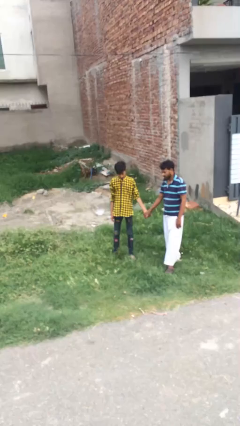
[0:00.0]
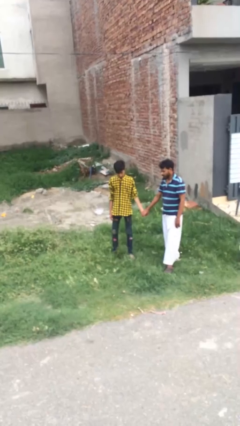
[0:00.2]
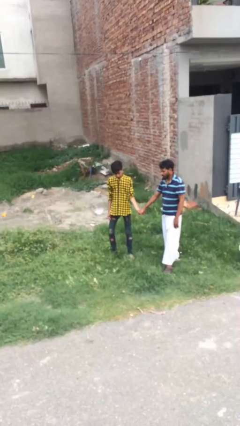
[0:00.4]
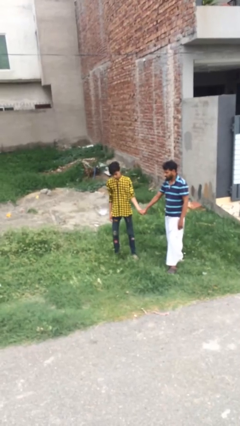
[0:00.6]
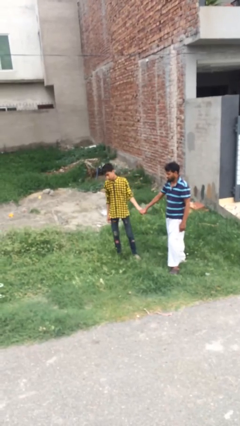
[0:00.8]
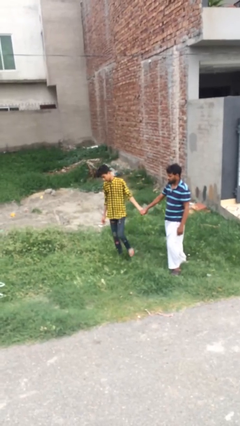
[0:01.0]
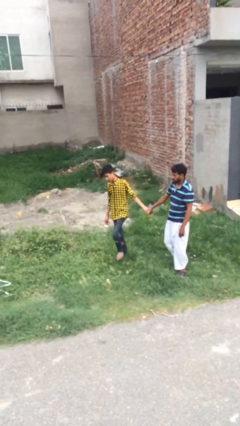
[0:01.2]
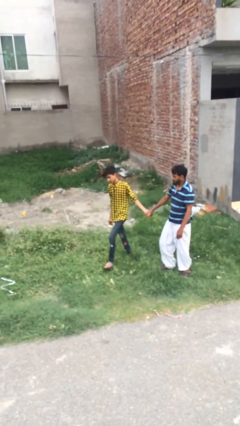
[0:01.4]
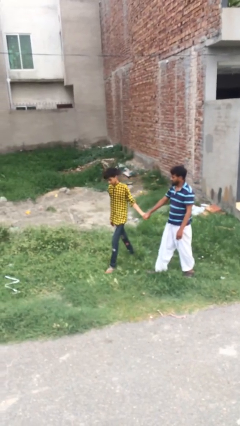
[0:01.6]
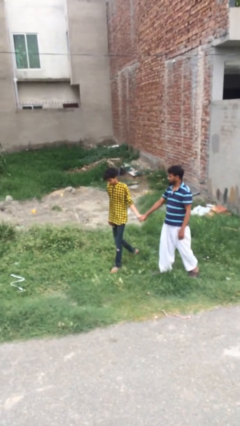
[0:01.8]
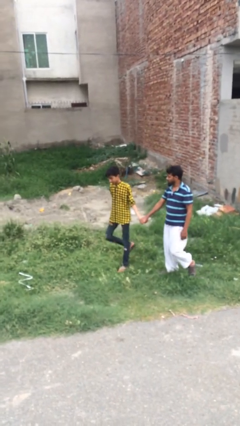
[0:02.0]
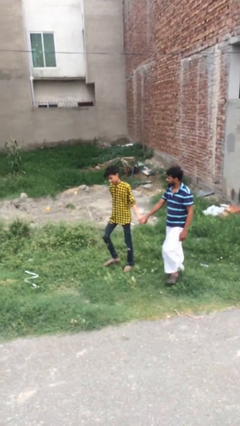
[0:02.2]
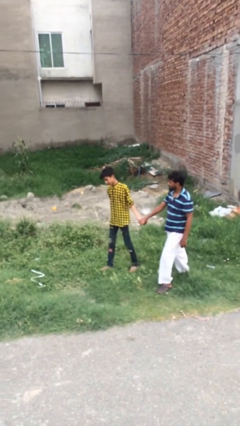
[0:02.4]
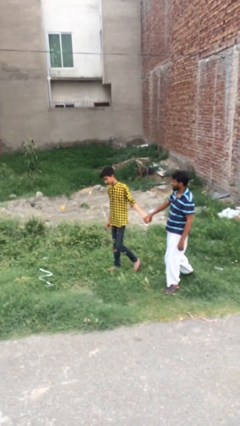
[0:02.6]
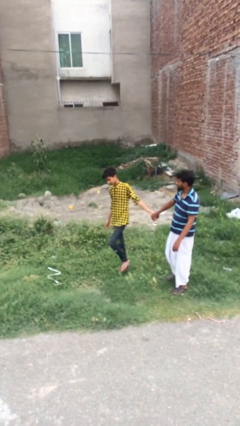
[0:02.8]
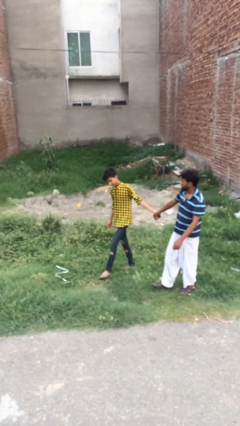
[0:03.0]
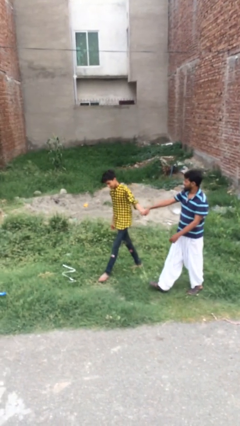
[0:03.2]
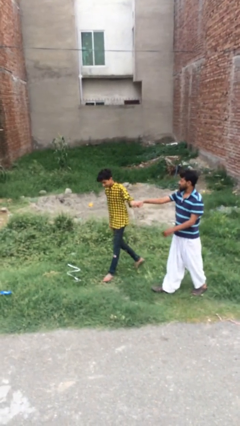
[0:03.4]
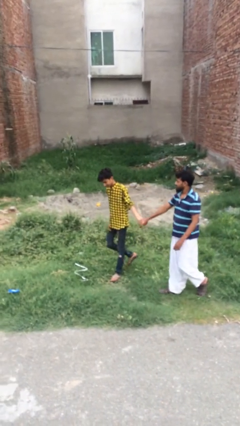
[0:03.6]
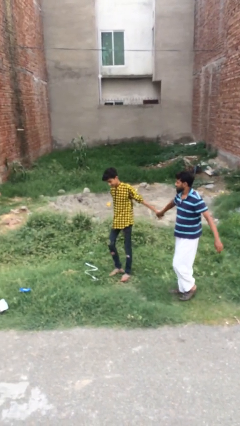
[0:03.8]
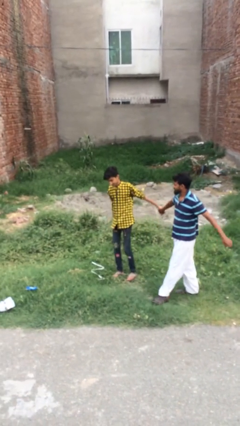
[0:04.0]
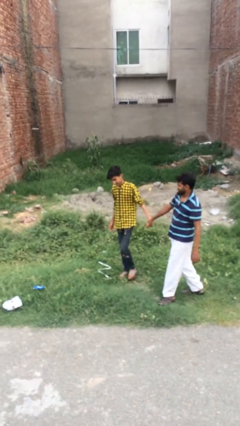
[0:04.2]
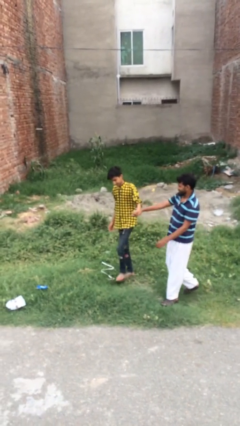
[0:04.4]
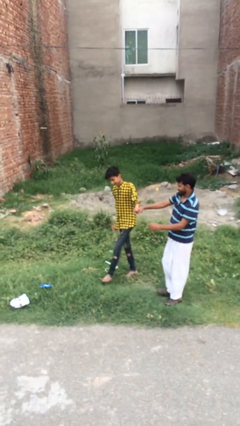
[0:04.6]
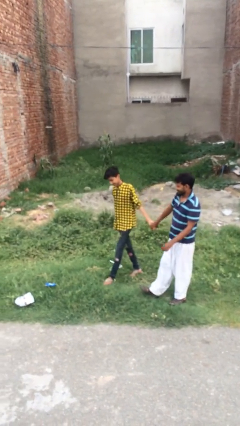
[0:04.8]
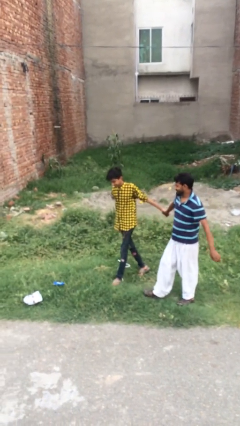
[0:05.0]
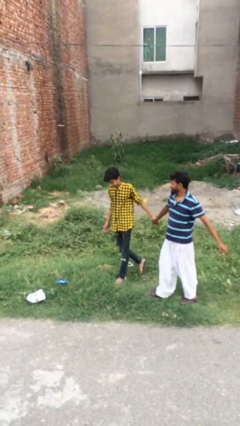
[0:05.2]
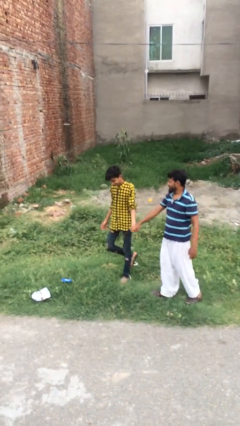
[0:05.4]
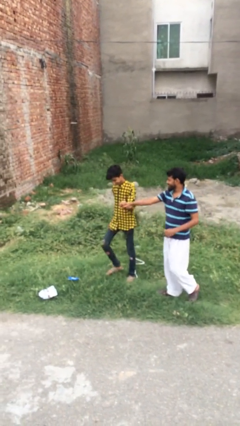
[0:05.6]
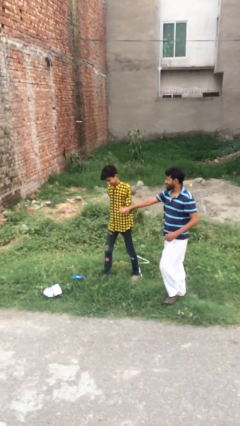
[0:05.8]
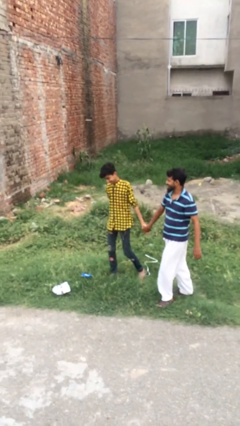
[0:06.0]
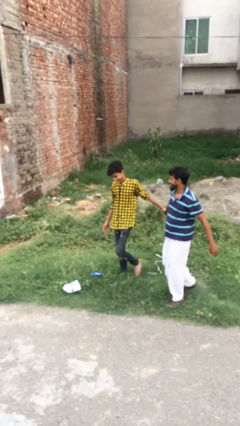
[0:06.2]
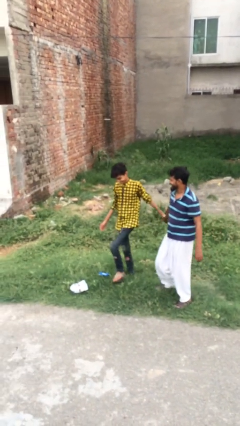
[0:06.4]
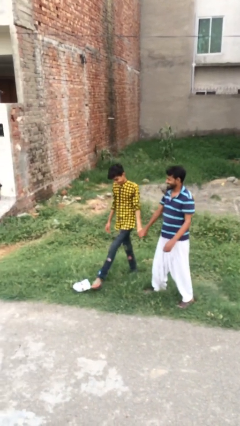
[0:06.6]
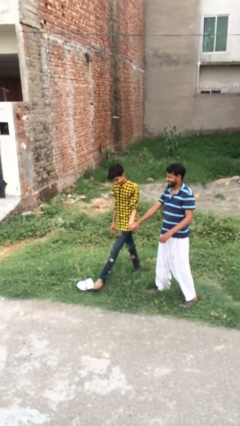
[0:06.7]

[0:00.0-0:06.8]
person holds hand

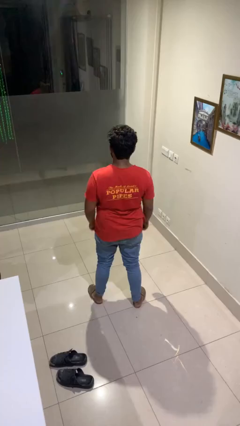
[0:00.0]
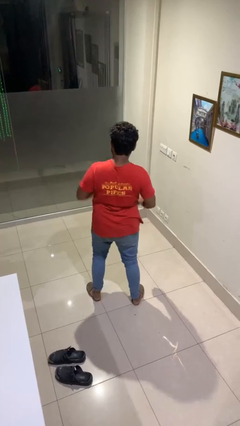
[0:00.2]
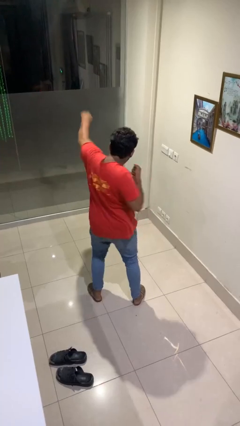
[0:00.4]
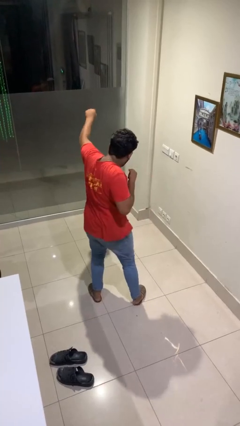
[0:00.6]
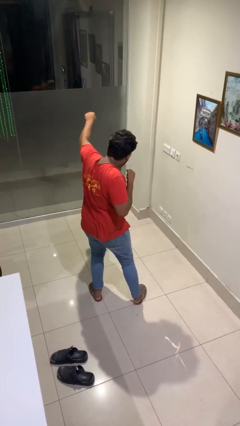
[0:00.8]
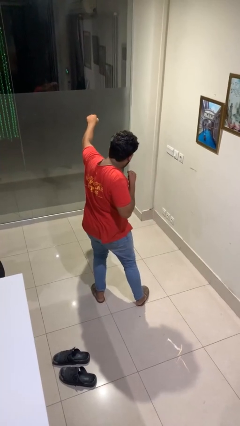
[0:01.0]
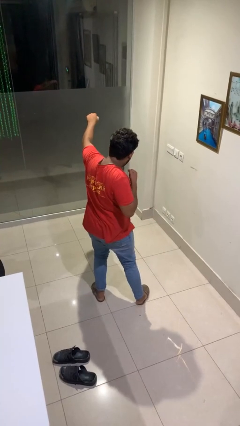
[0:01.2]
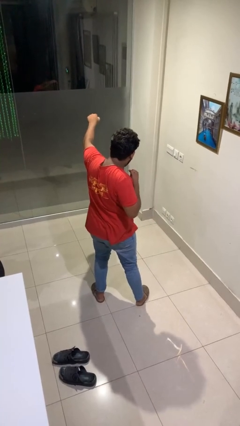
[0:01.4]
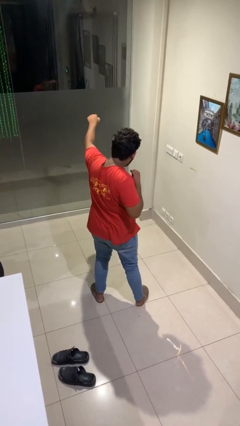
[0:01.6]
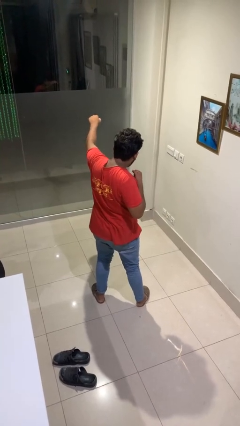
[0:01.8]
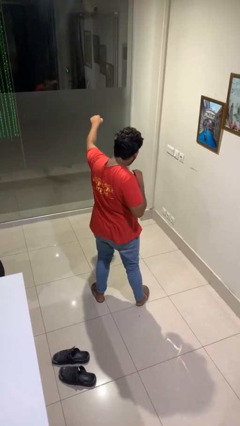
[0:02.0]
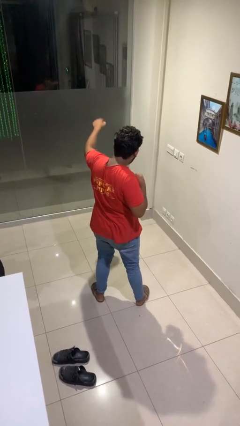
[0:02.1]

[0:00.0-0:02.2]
person punches

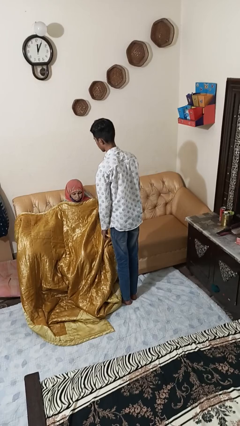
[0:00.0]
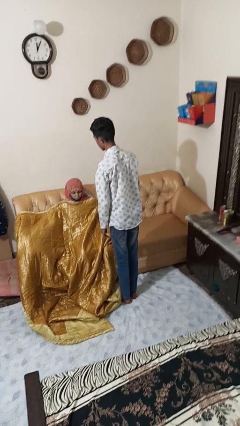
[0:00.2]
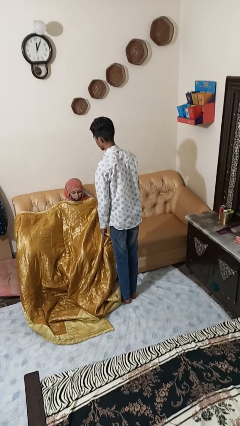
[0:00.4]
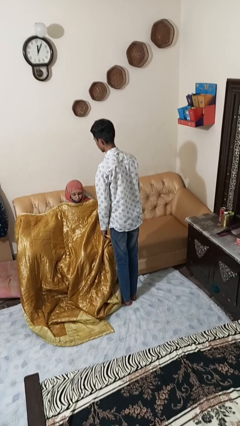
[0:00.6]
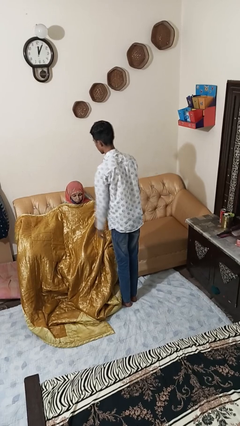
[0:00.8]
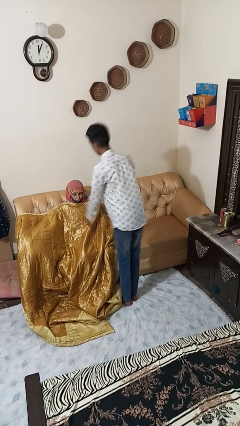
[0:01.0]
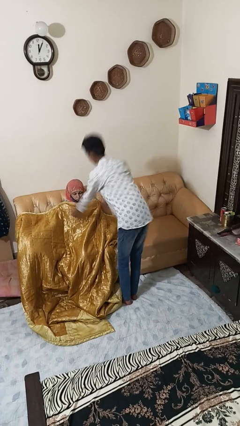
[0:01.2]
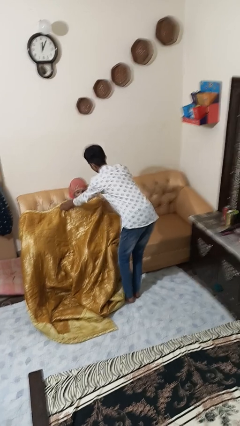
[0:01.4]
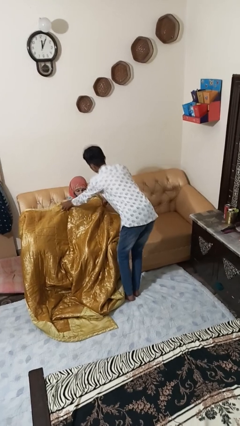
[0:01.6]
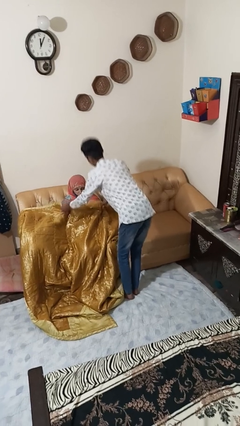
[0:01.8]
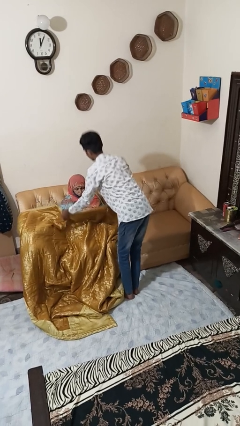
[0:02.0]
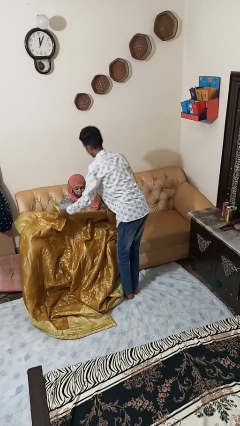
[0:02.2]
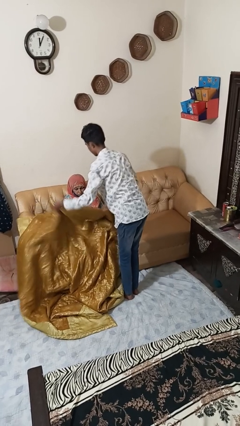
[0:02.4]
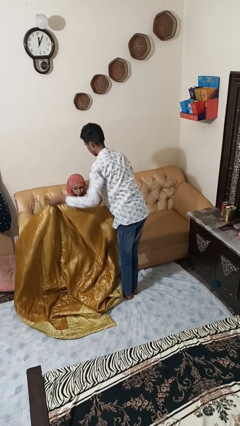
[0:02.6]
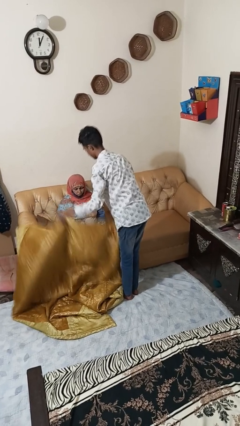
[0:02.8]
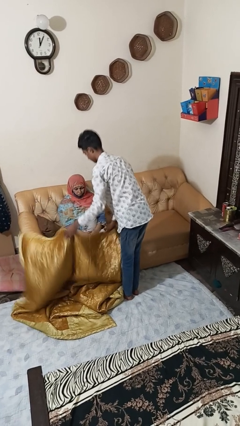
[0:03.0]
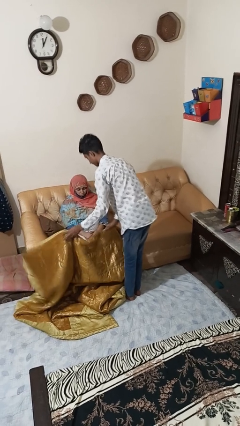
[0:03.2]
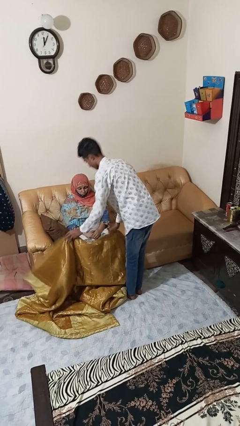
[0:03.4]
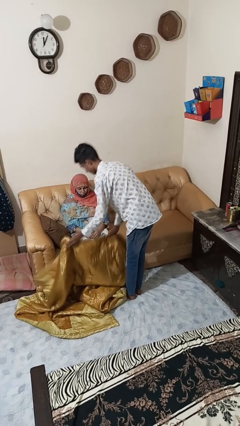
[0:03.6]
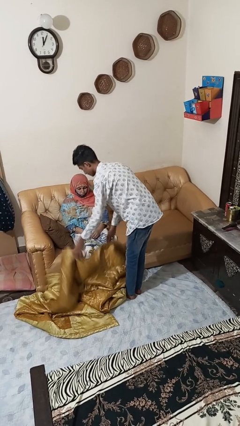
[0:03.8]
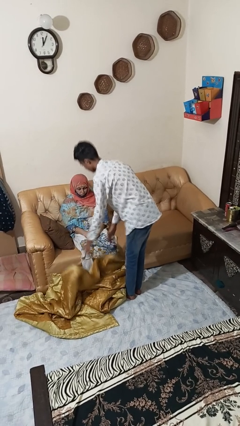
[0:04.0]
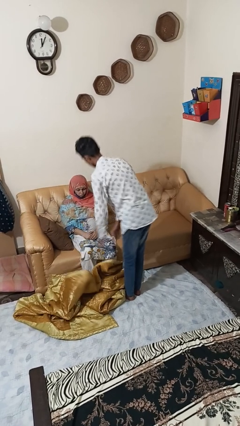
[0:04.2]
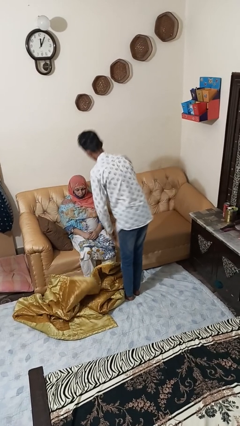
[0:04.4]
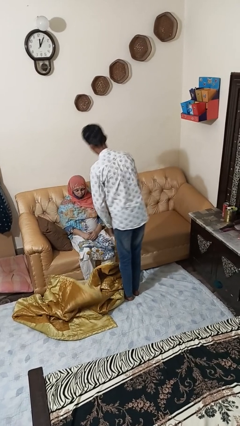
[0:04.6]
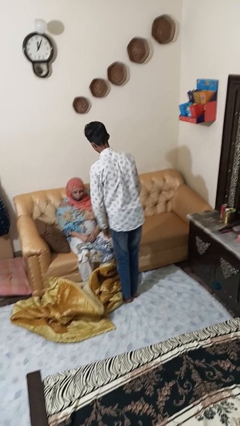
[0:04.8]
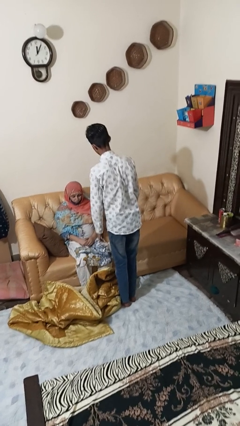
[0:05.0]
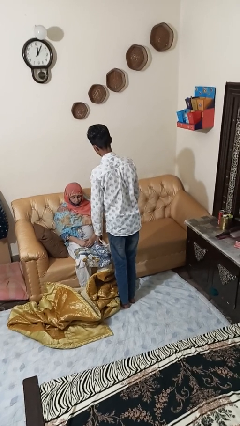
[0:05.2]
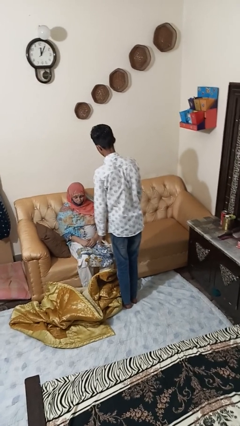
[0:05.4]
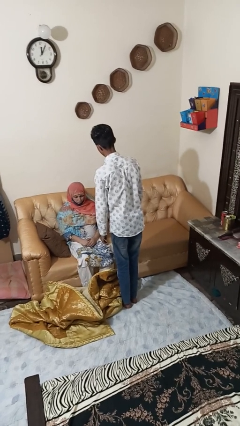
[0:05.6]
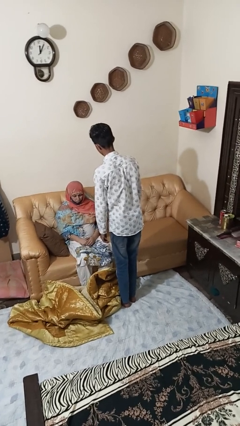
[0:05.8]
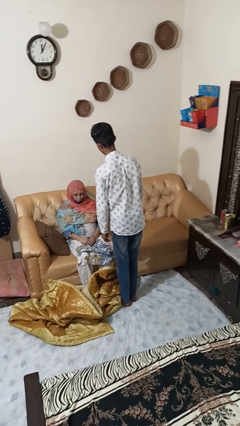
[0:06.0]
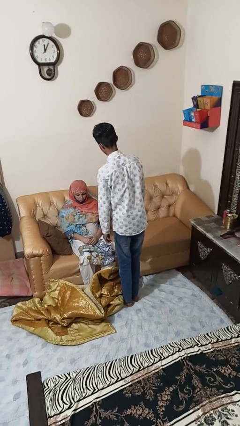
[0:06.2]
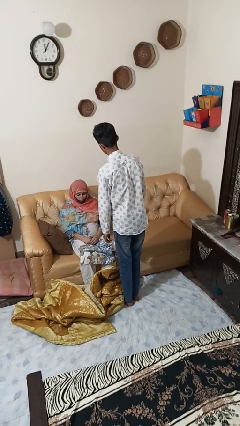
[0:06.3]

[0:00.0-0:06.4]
person uncovers friend with blanket

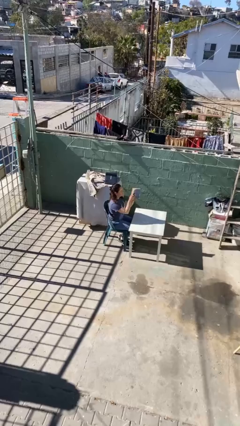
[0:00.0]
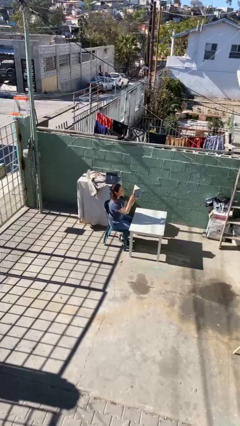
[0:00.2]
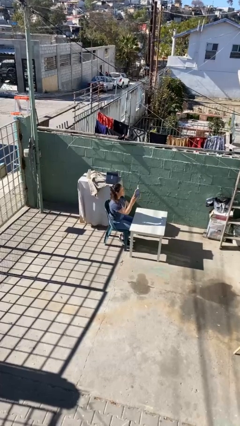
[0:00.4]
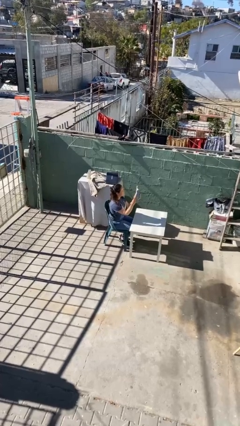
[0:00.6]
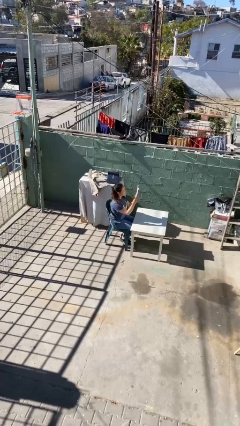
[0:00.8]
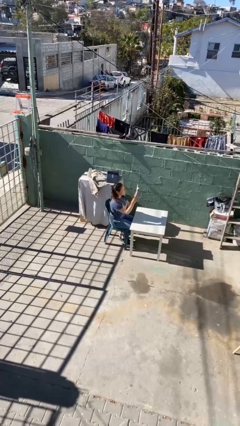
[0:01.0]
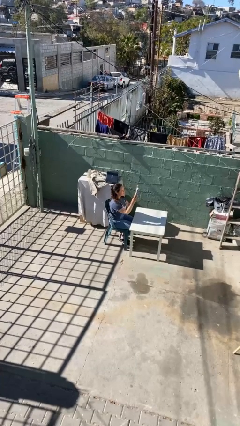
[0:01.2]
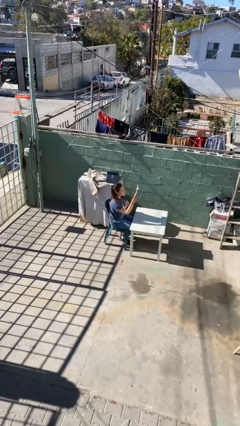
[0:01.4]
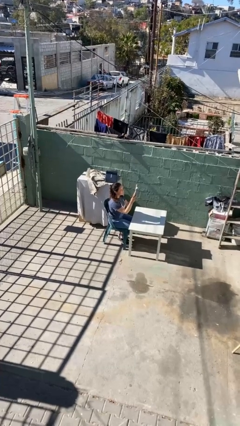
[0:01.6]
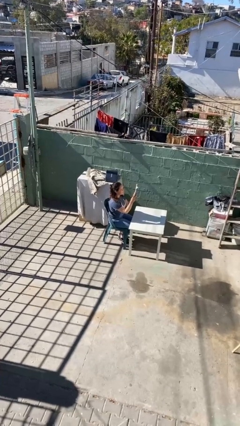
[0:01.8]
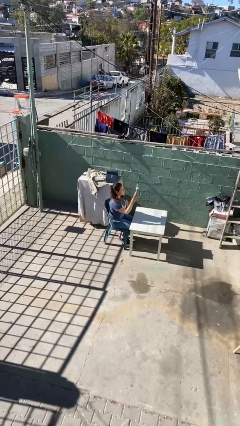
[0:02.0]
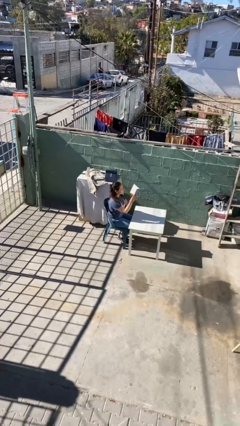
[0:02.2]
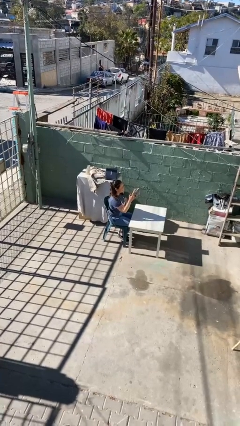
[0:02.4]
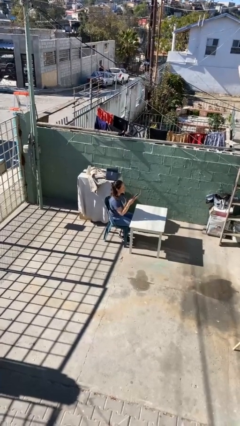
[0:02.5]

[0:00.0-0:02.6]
person reads document
